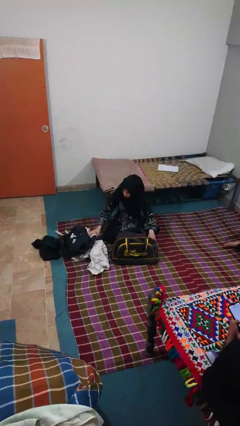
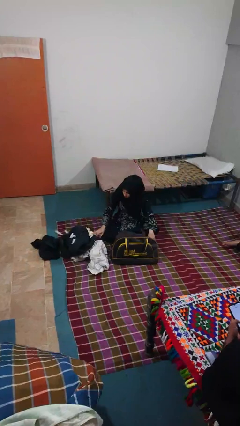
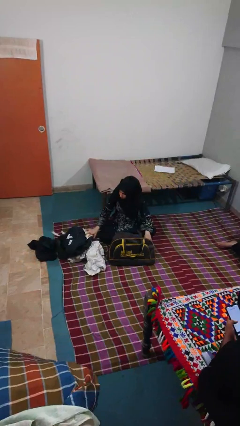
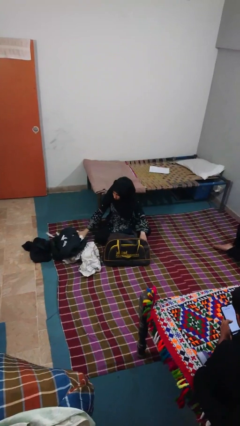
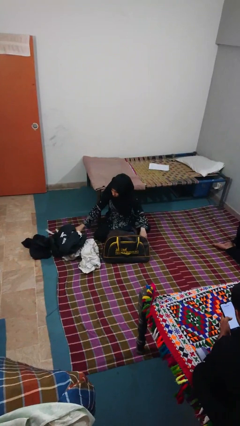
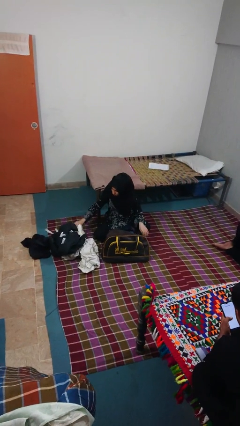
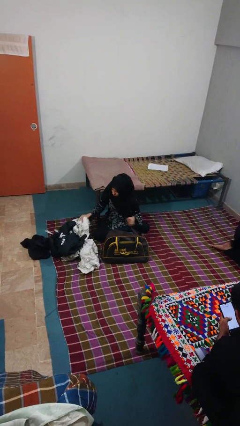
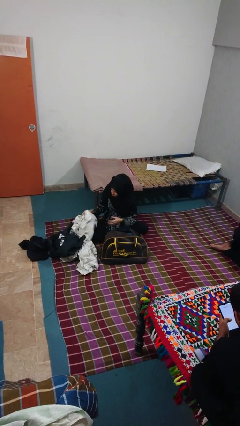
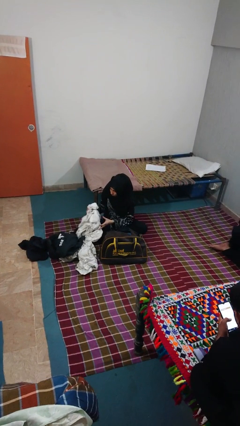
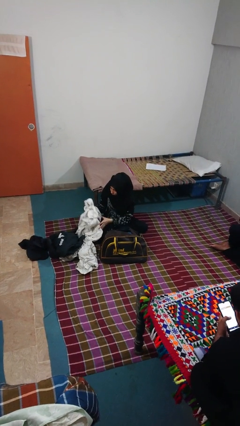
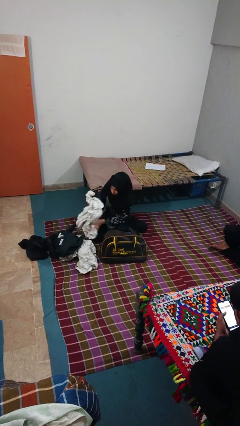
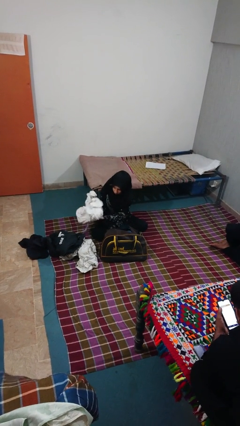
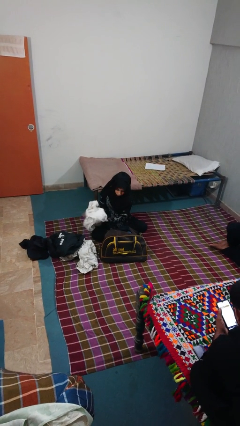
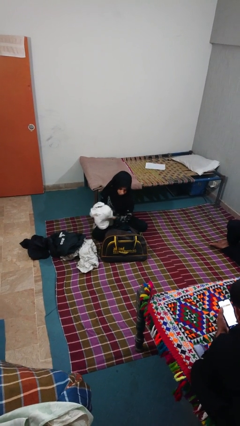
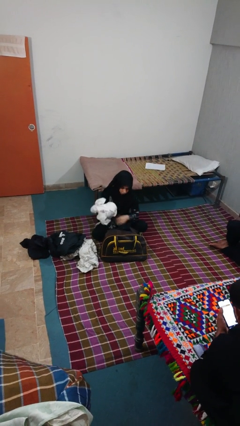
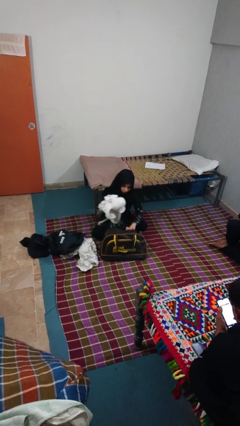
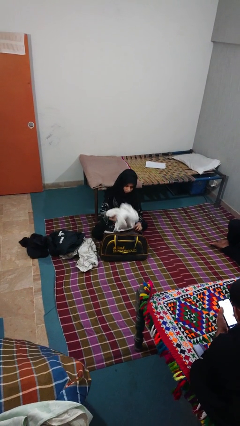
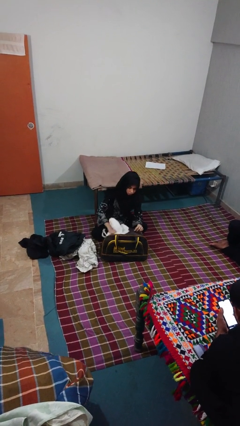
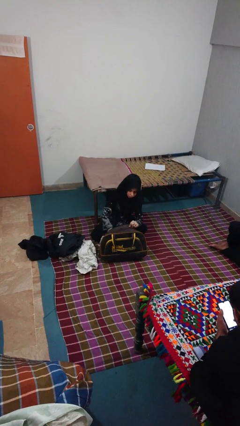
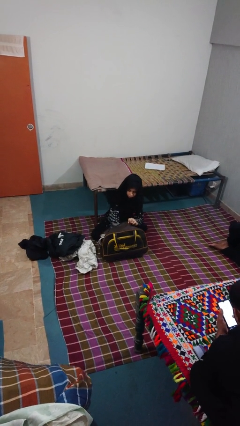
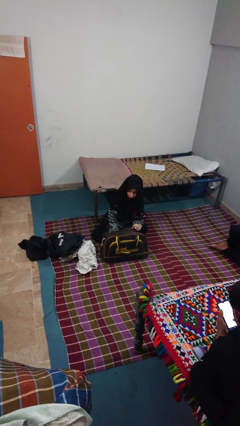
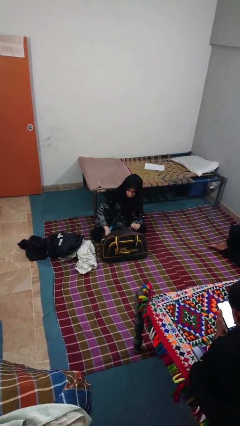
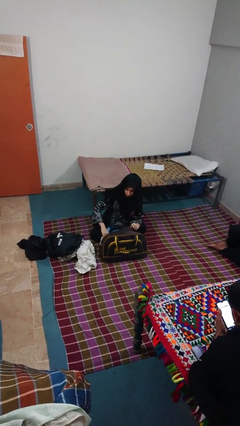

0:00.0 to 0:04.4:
person loads clothes into suitcase

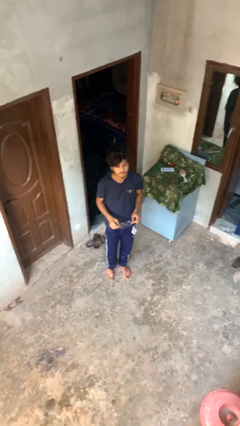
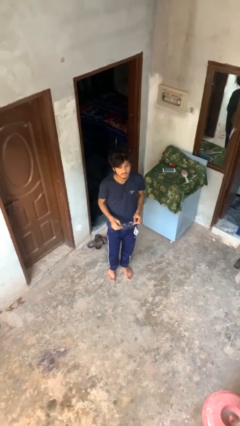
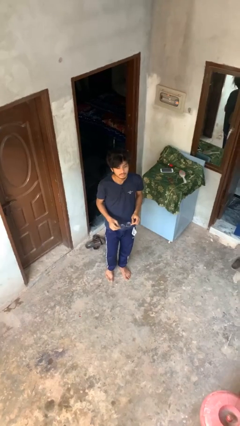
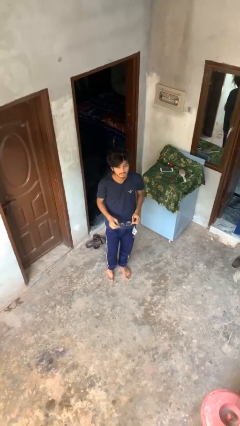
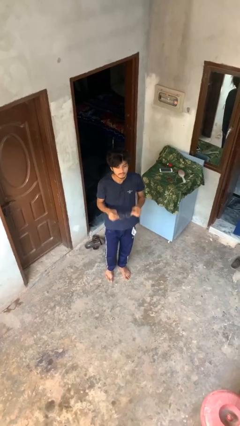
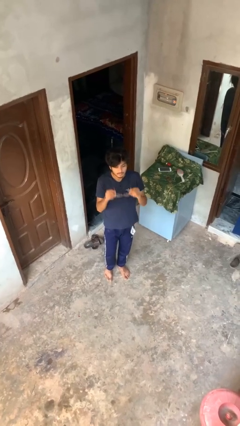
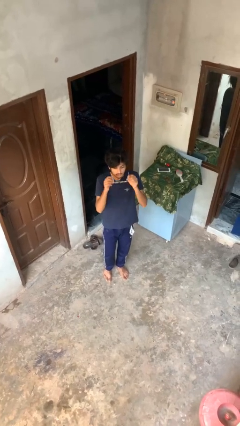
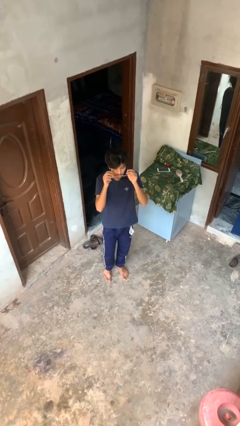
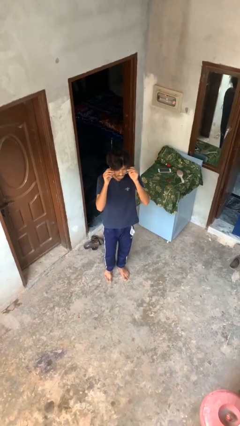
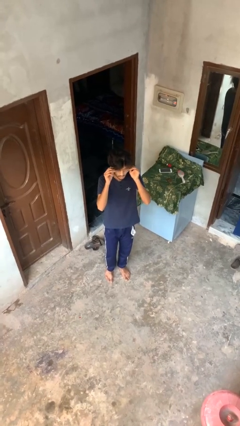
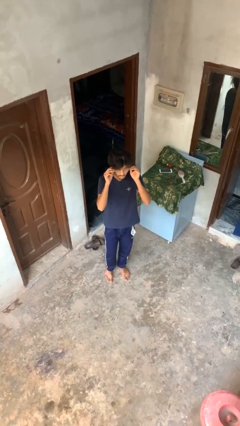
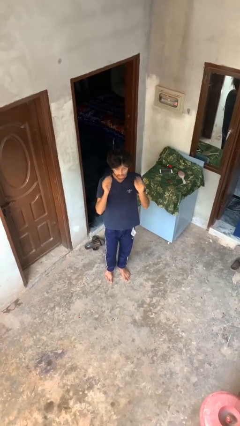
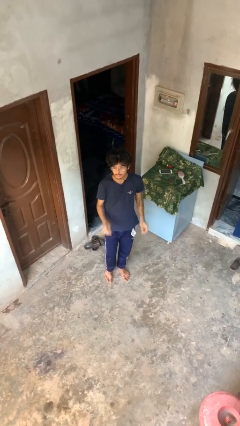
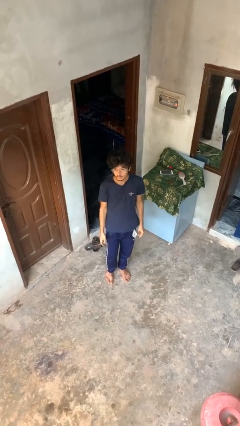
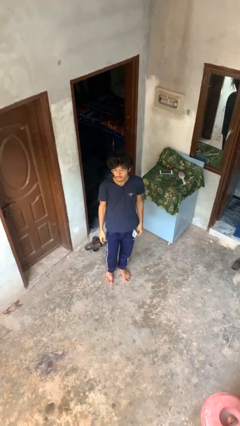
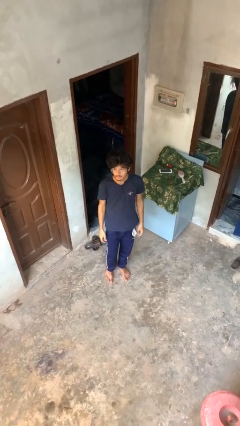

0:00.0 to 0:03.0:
person puts on glasses

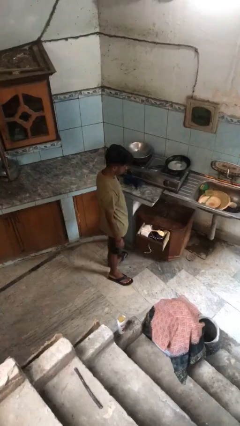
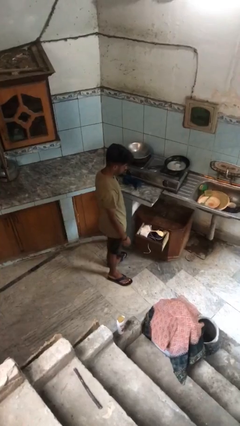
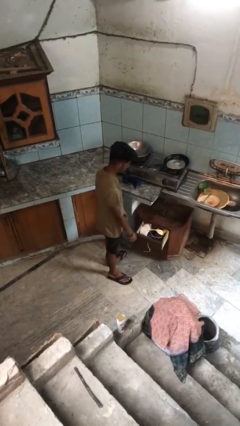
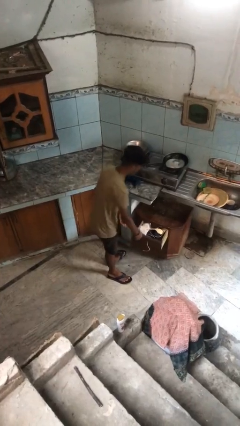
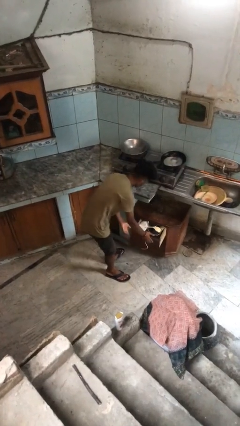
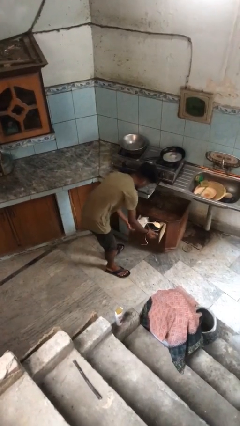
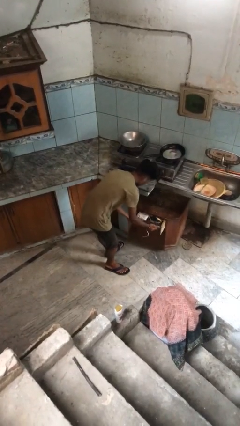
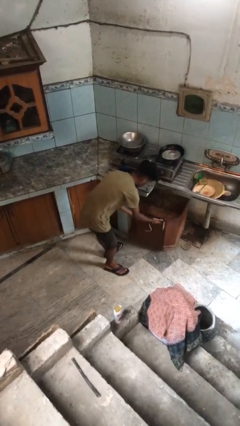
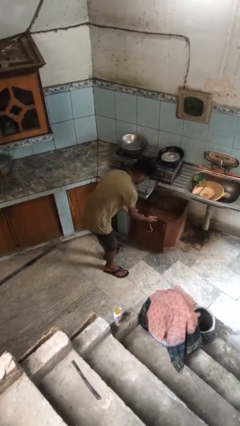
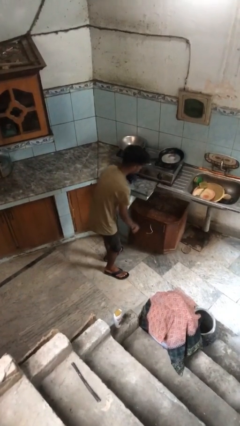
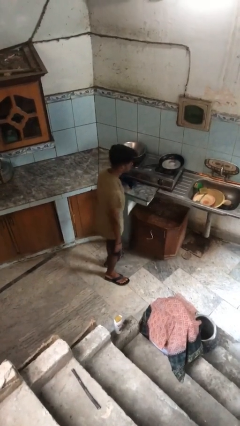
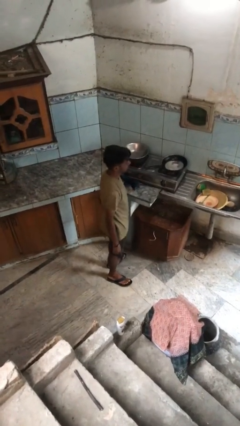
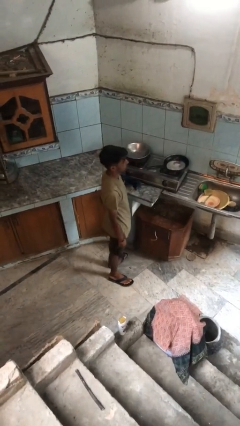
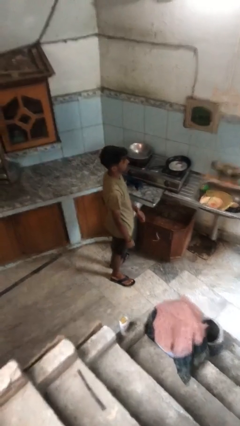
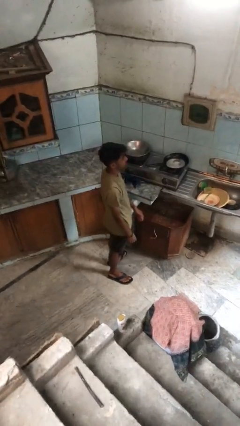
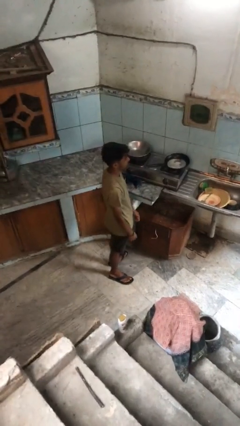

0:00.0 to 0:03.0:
person closes kitchen drawer

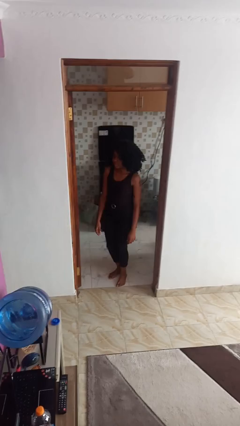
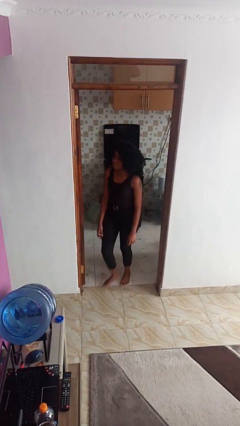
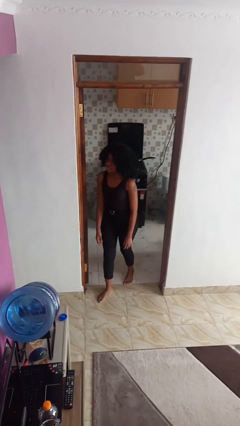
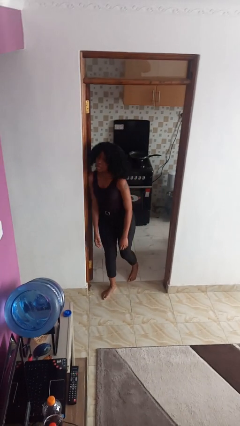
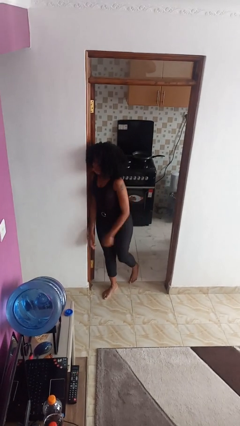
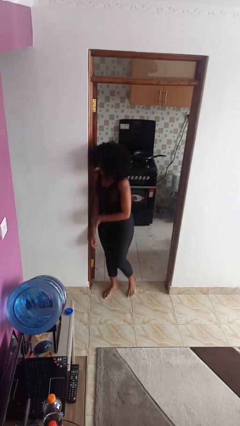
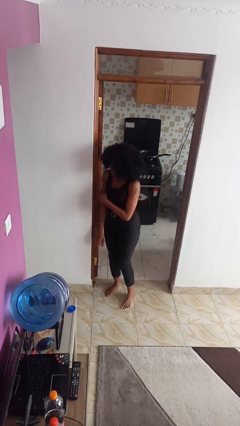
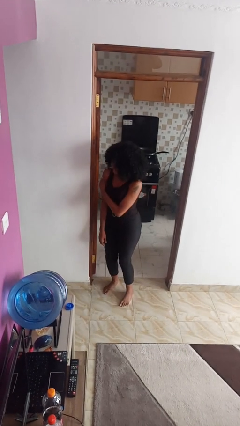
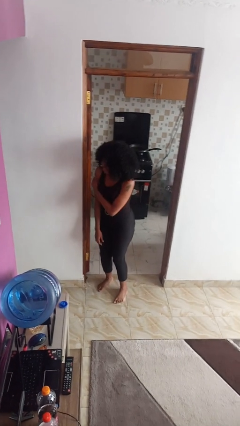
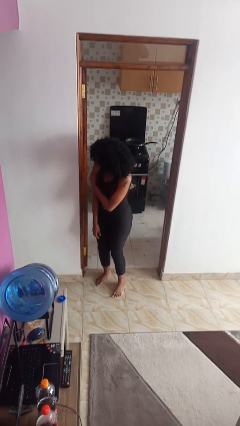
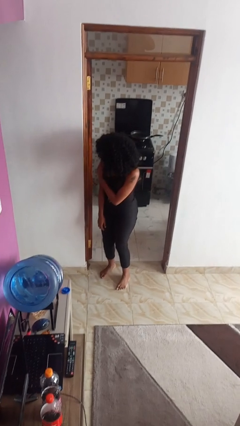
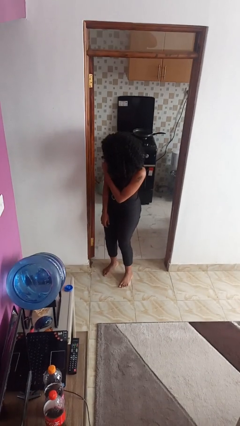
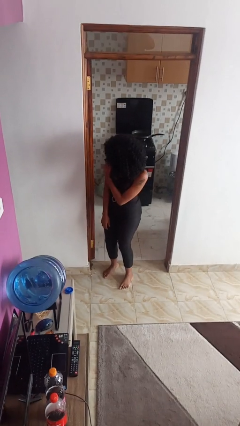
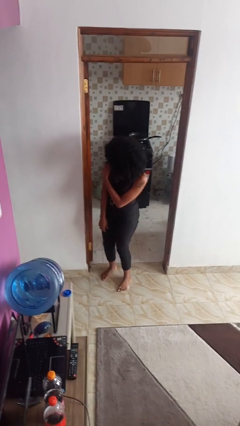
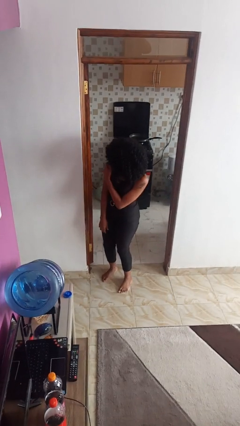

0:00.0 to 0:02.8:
person bumps into wall

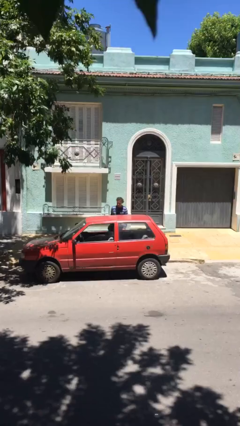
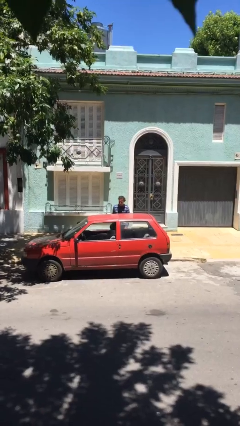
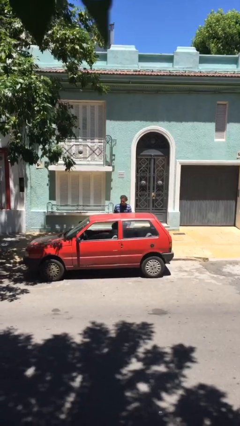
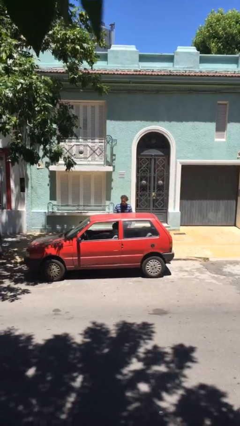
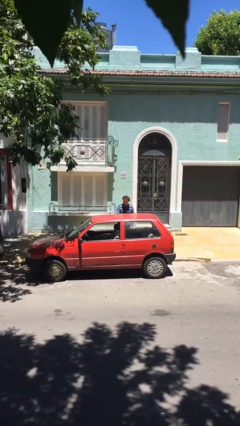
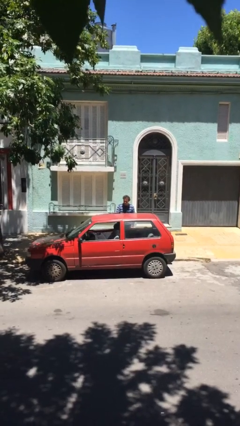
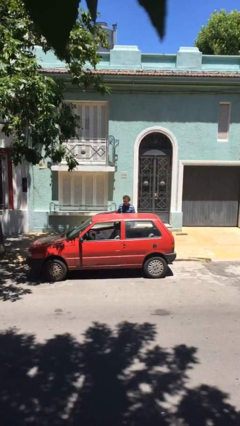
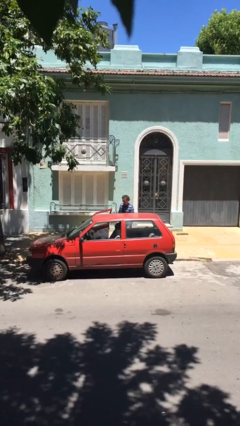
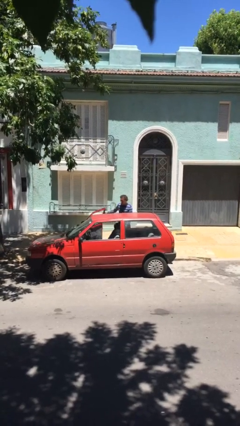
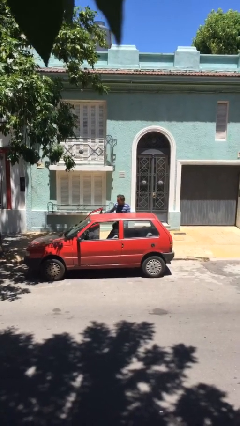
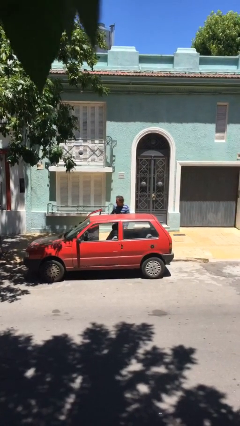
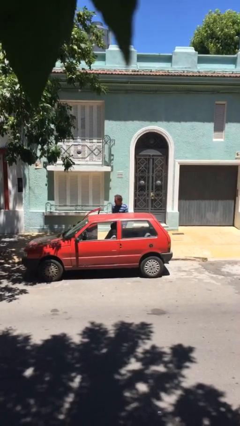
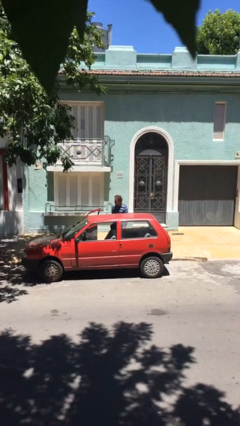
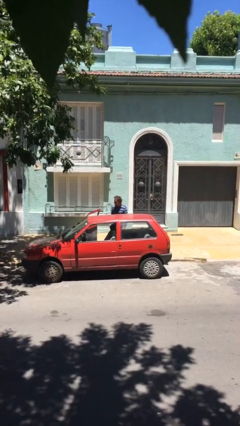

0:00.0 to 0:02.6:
person opens car door

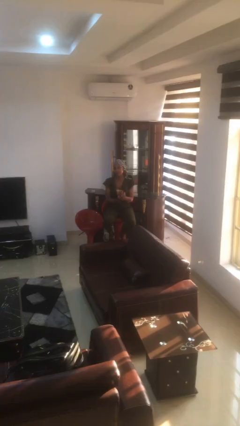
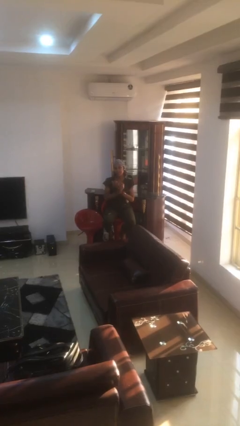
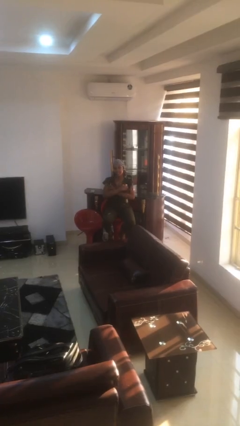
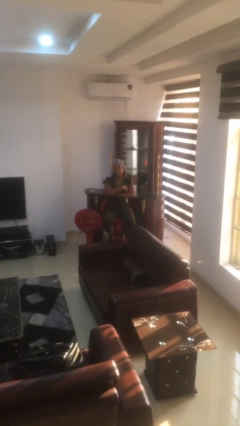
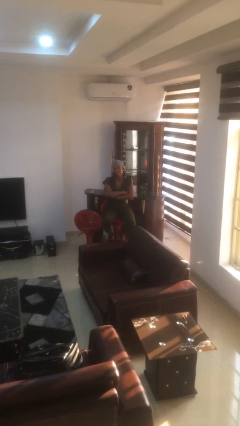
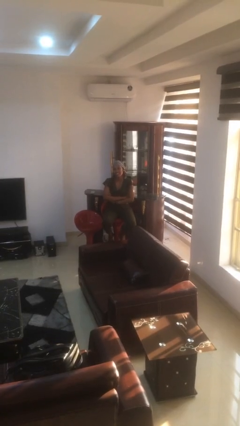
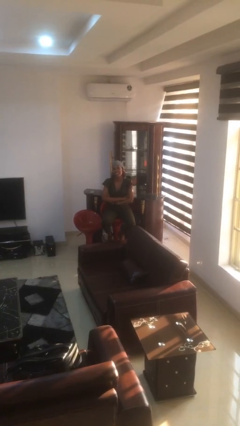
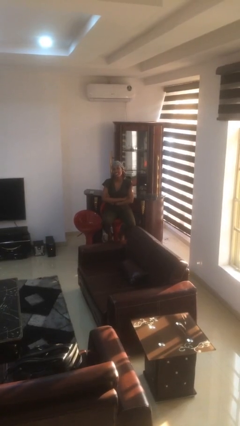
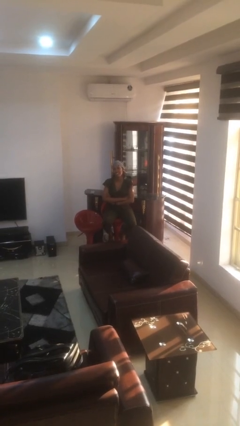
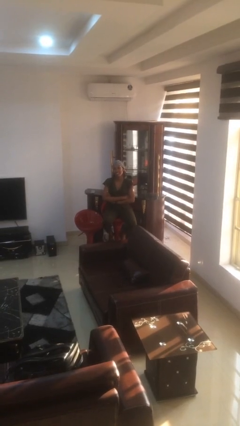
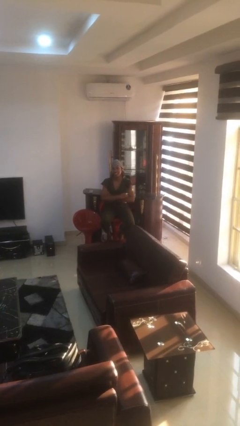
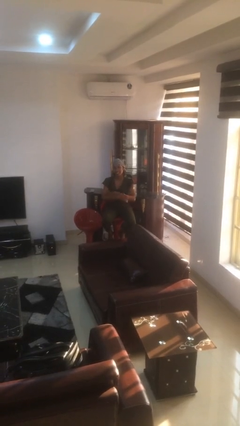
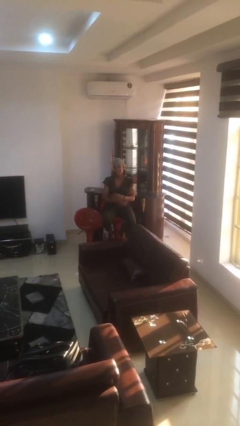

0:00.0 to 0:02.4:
person crosses arms
